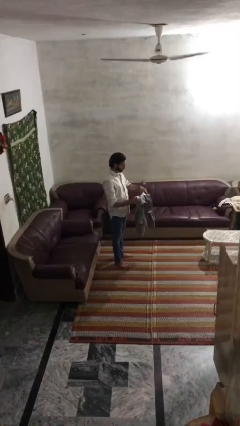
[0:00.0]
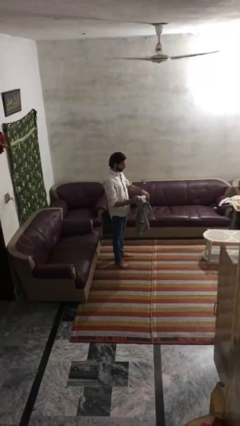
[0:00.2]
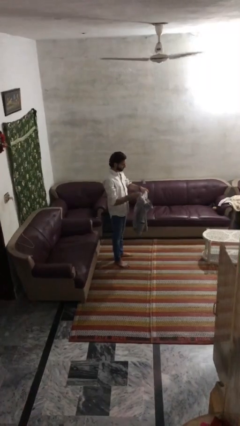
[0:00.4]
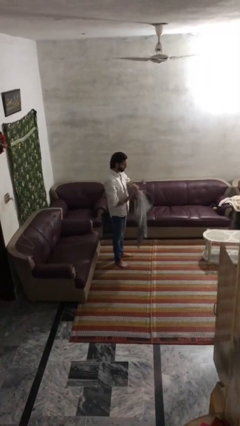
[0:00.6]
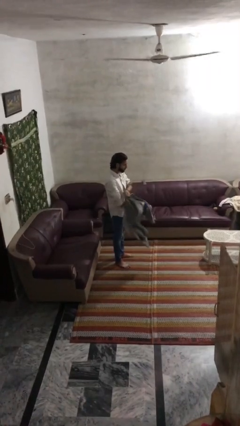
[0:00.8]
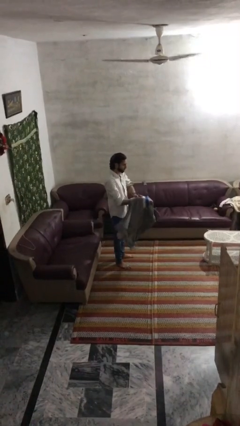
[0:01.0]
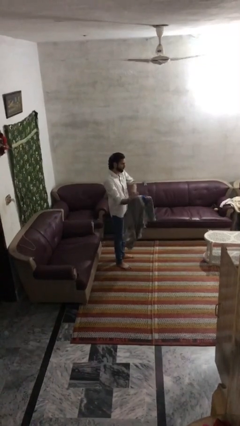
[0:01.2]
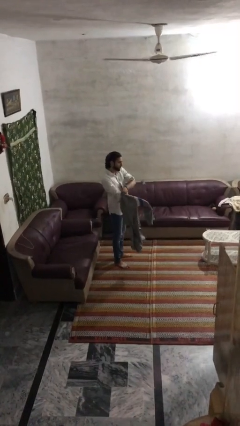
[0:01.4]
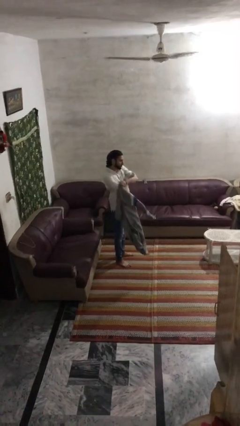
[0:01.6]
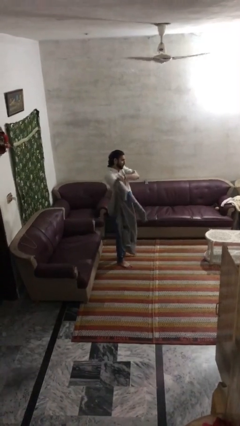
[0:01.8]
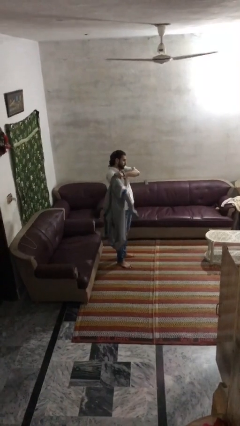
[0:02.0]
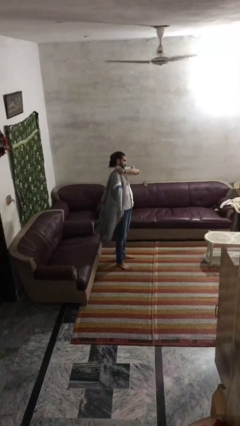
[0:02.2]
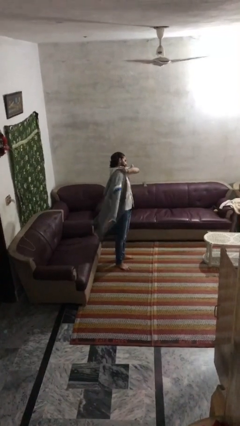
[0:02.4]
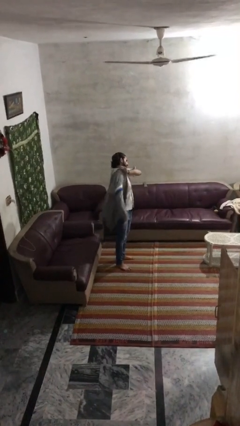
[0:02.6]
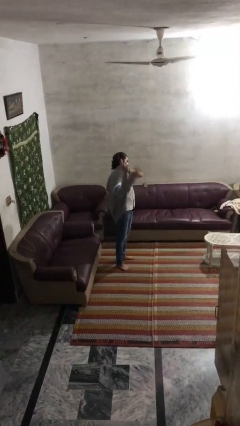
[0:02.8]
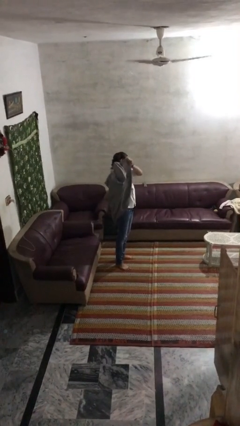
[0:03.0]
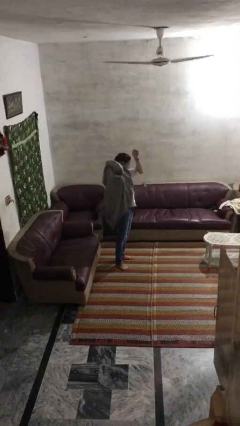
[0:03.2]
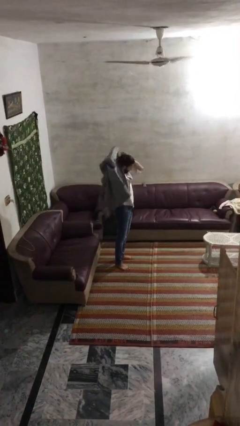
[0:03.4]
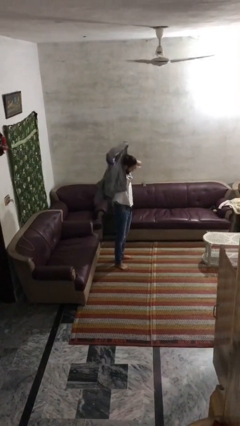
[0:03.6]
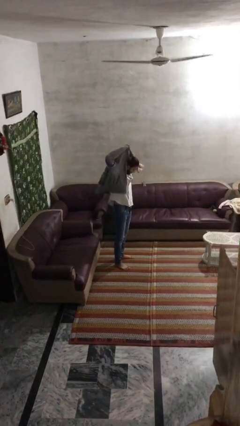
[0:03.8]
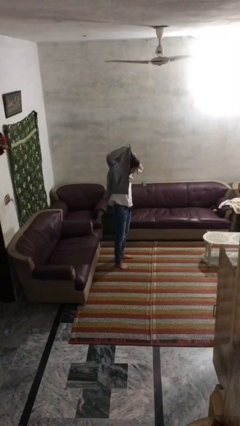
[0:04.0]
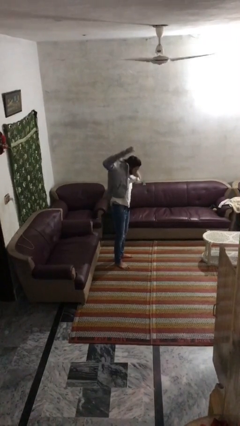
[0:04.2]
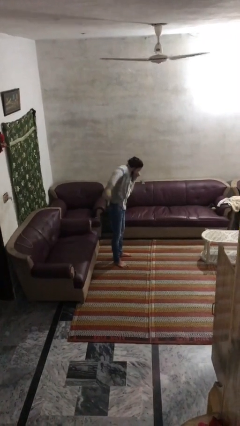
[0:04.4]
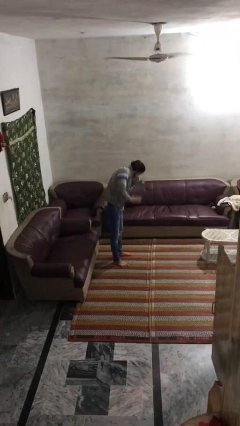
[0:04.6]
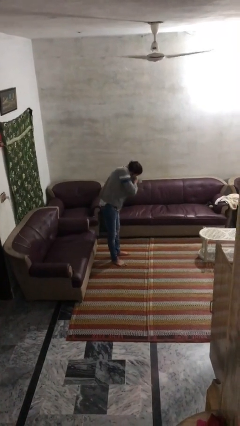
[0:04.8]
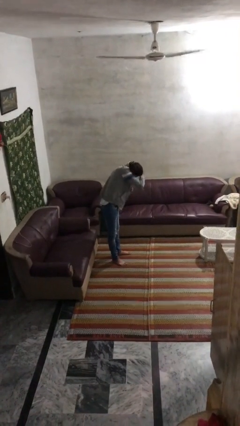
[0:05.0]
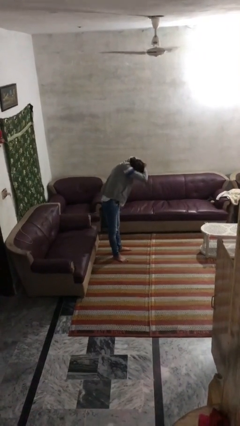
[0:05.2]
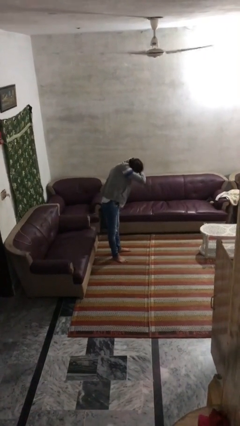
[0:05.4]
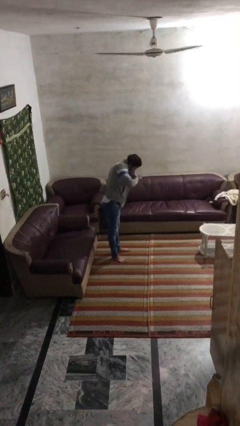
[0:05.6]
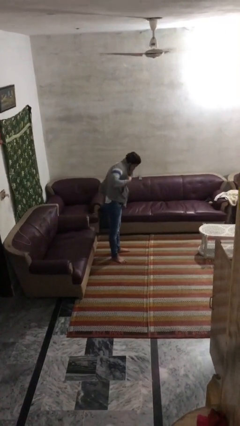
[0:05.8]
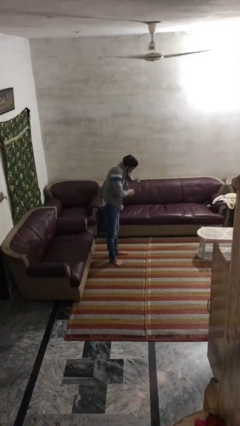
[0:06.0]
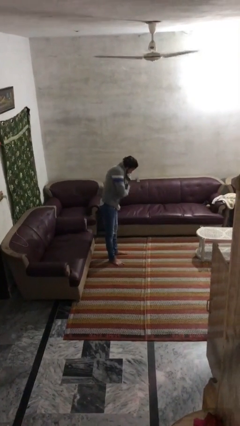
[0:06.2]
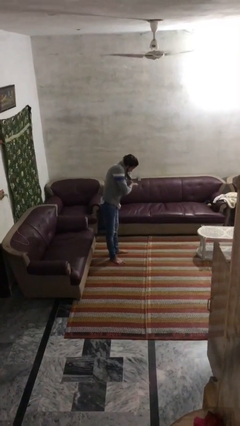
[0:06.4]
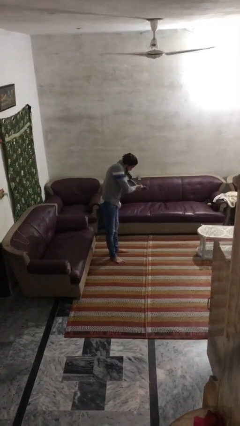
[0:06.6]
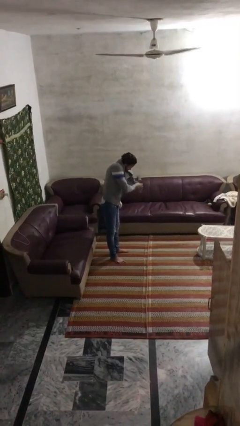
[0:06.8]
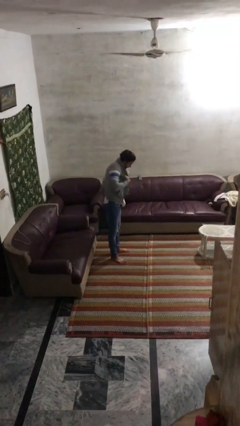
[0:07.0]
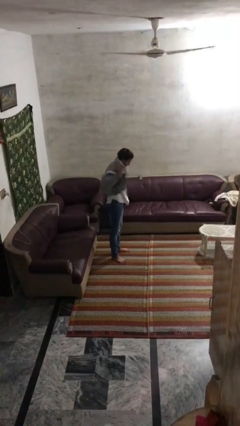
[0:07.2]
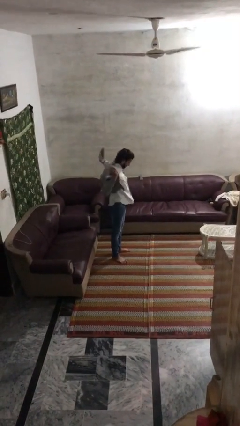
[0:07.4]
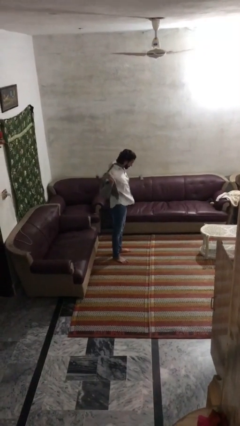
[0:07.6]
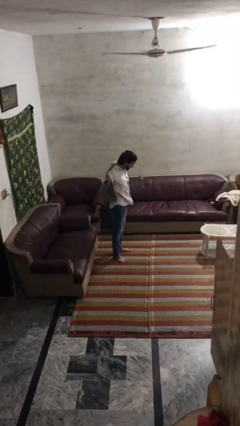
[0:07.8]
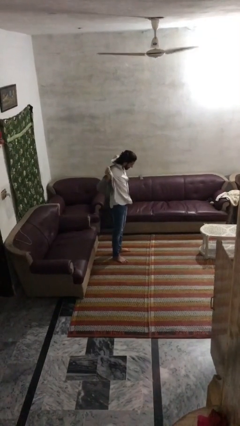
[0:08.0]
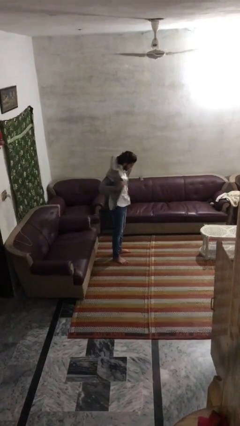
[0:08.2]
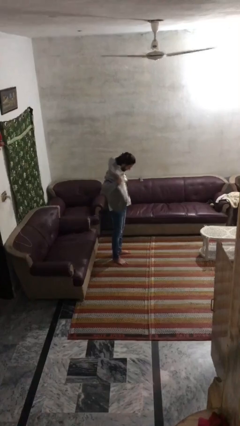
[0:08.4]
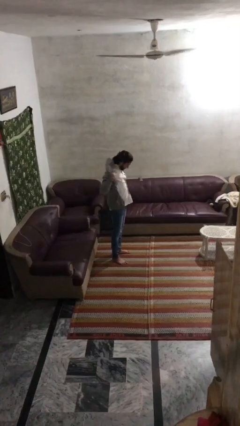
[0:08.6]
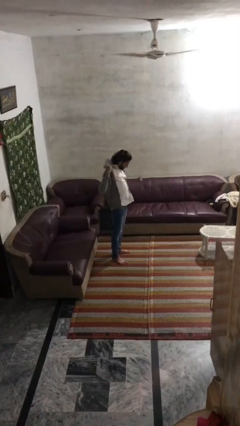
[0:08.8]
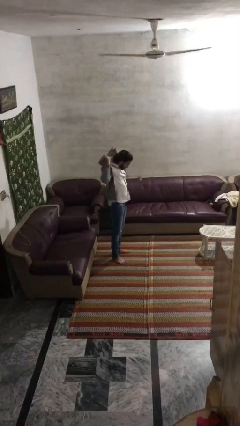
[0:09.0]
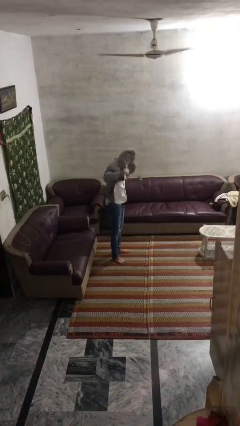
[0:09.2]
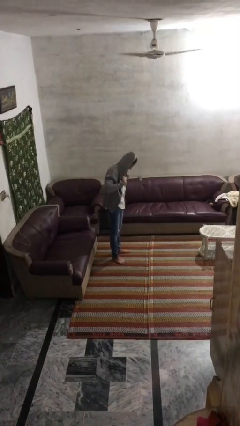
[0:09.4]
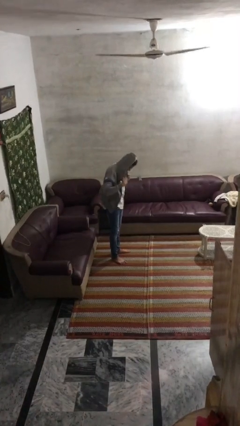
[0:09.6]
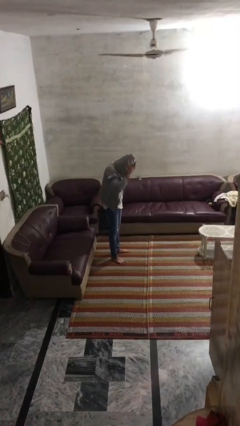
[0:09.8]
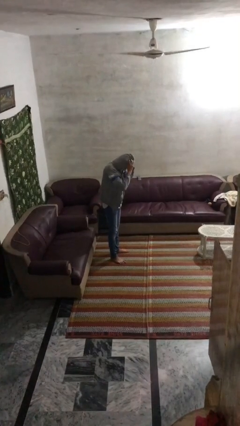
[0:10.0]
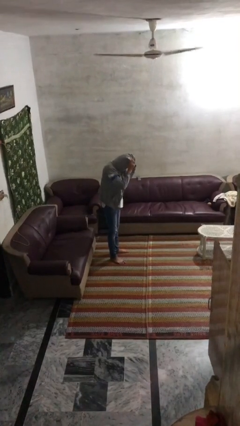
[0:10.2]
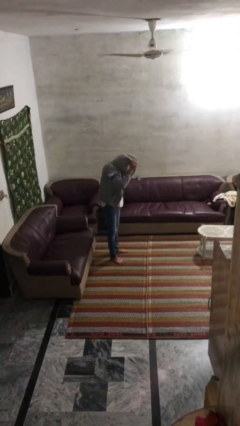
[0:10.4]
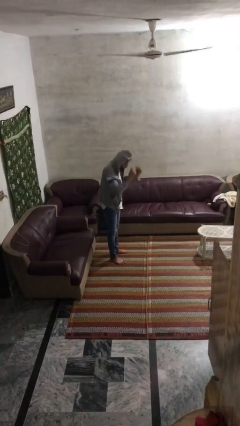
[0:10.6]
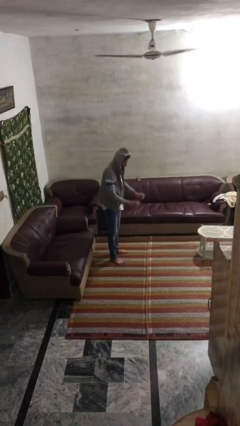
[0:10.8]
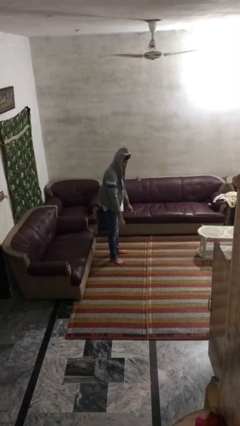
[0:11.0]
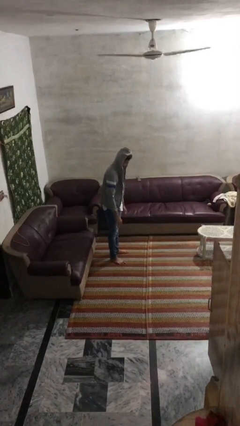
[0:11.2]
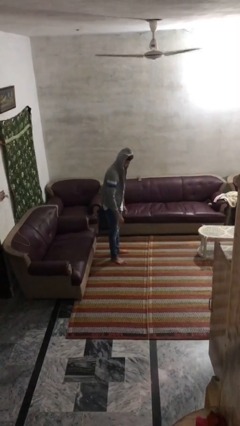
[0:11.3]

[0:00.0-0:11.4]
person puts on hoodie

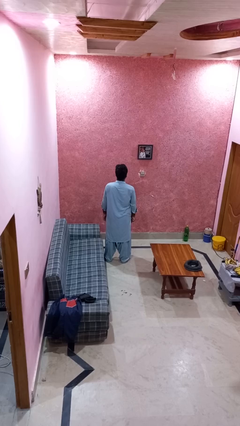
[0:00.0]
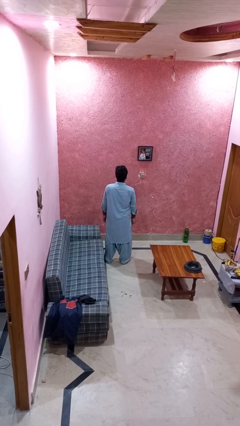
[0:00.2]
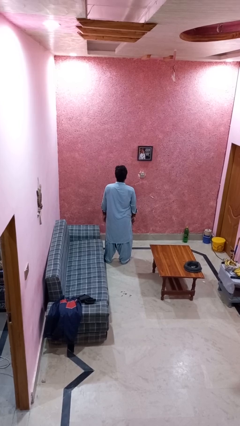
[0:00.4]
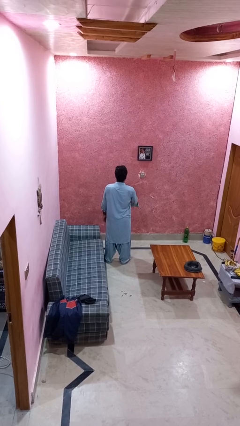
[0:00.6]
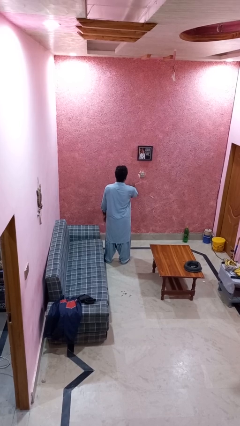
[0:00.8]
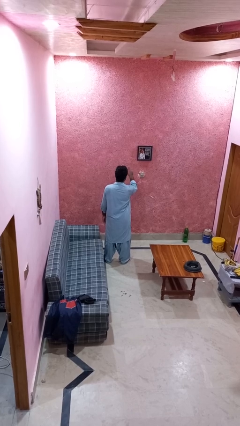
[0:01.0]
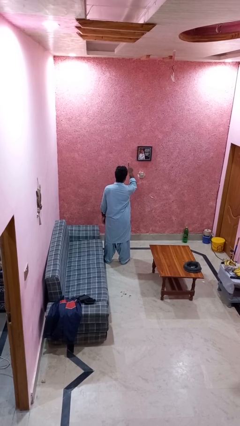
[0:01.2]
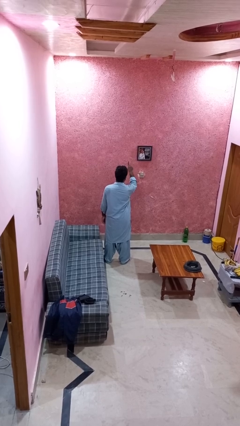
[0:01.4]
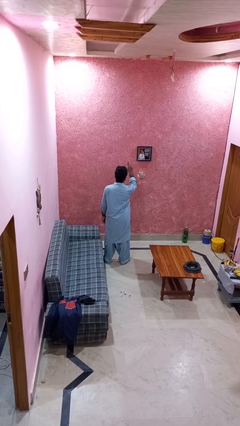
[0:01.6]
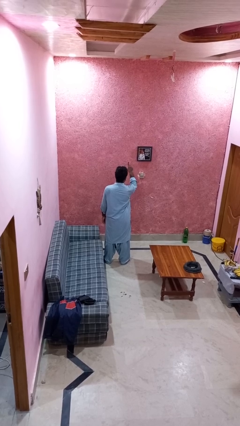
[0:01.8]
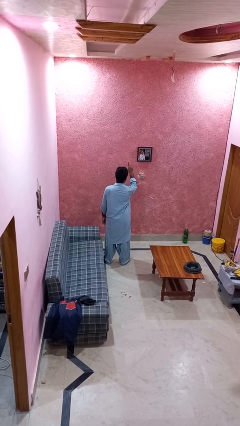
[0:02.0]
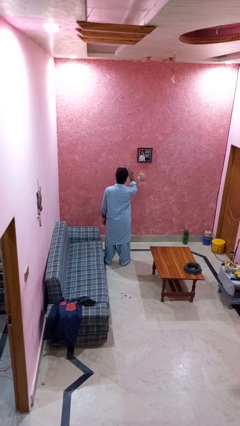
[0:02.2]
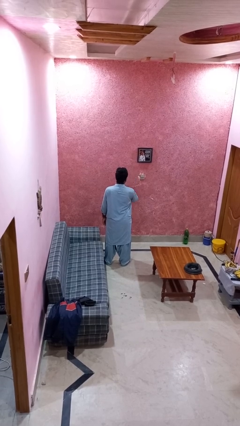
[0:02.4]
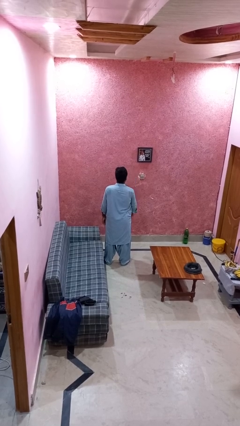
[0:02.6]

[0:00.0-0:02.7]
person gestures number one

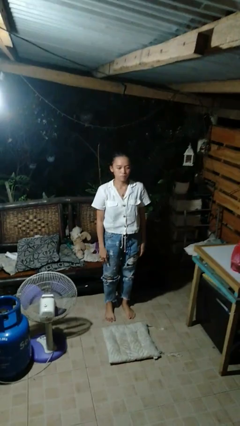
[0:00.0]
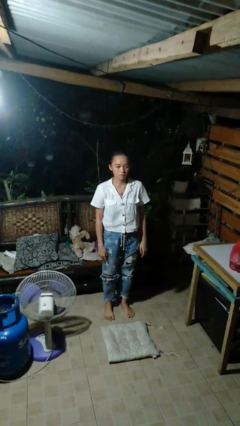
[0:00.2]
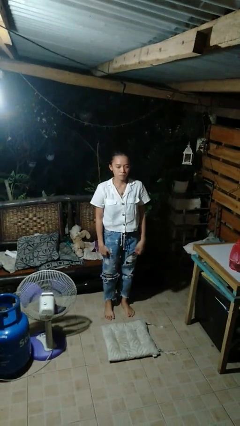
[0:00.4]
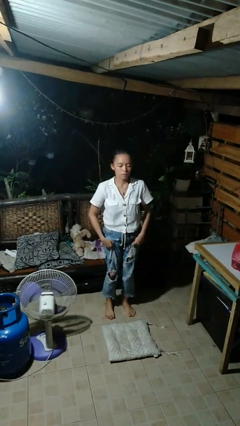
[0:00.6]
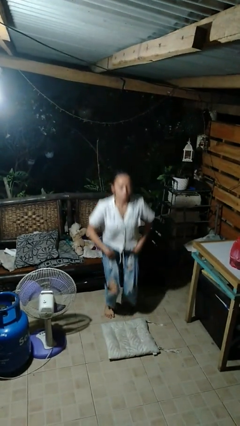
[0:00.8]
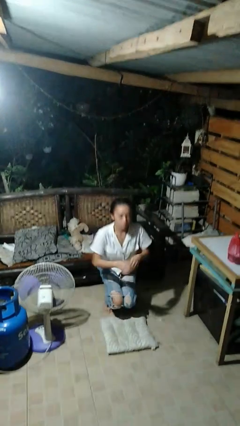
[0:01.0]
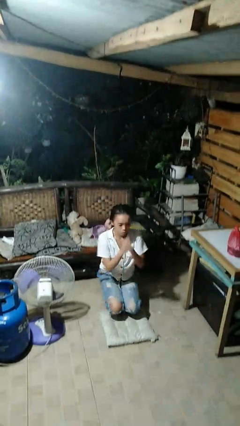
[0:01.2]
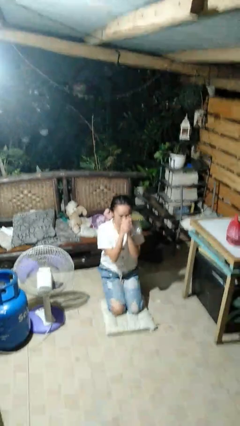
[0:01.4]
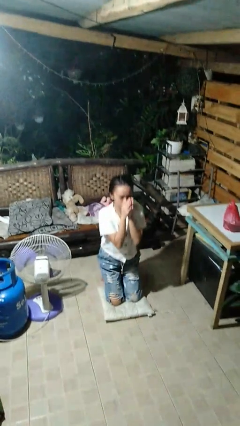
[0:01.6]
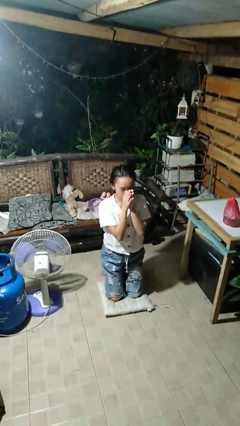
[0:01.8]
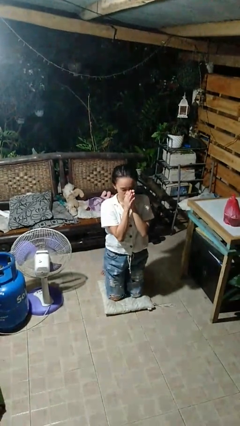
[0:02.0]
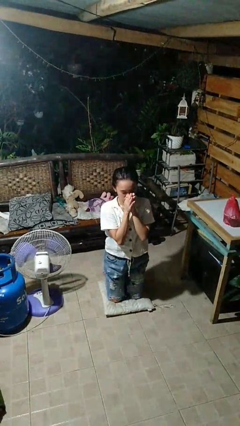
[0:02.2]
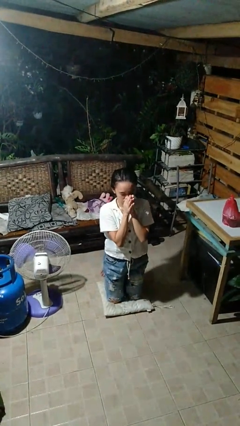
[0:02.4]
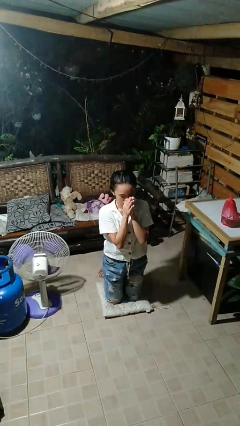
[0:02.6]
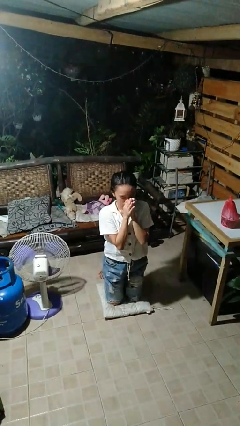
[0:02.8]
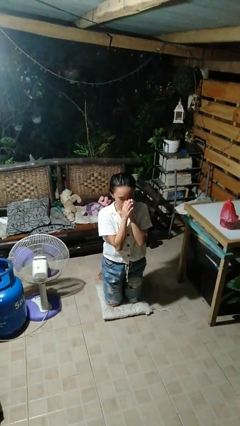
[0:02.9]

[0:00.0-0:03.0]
person prays

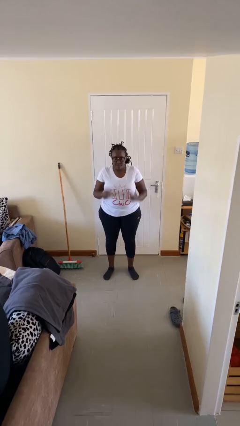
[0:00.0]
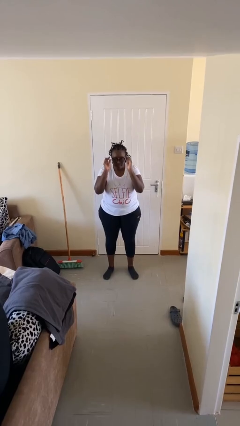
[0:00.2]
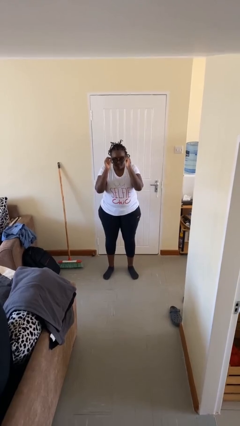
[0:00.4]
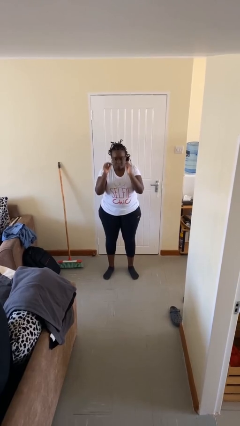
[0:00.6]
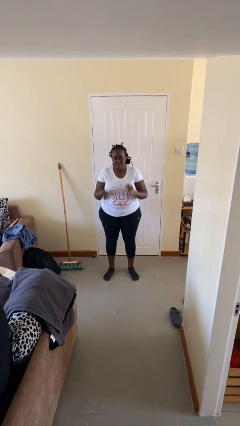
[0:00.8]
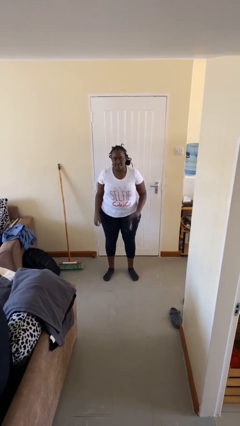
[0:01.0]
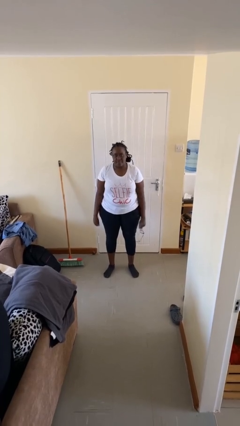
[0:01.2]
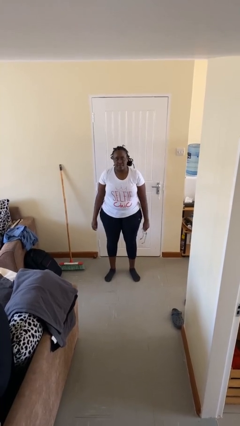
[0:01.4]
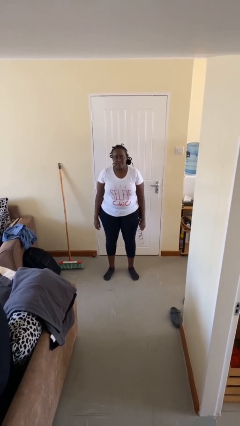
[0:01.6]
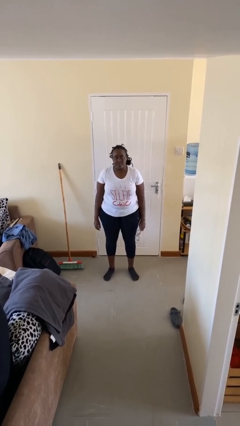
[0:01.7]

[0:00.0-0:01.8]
person takes off glasses
